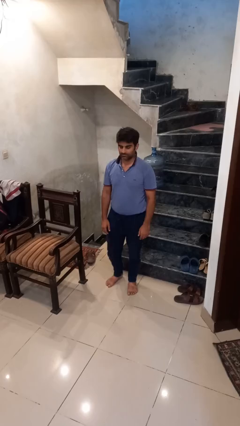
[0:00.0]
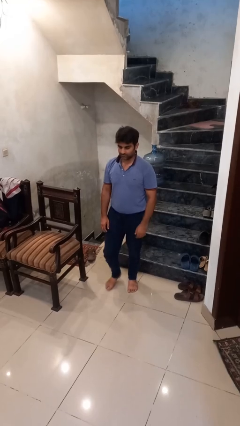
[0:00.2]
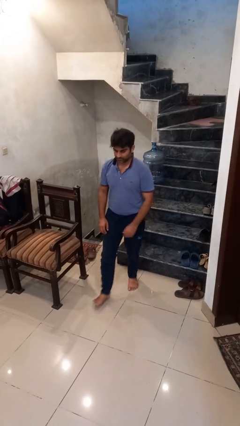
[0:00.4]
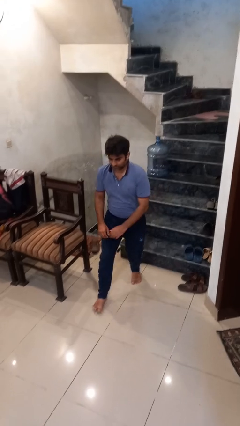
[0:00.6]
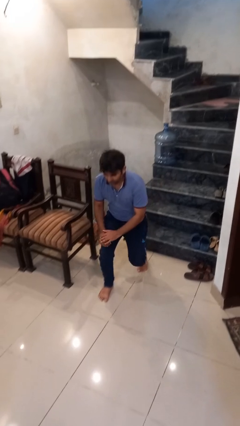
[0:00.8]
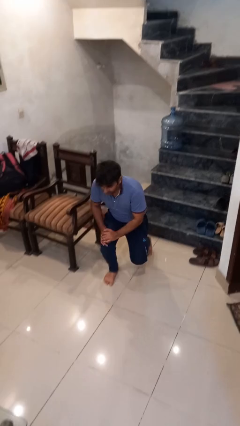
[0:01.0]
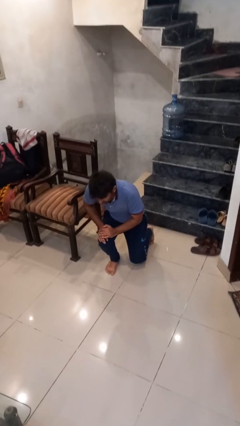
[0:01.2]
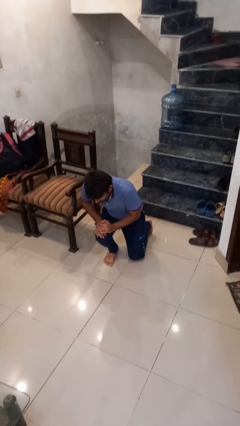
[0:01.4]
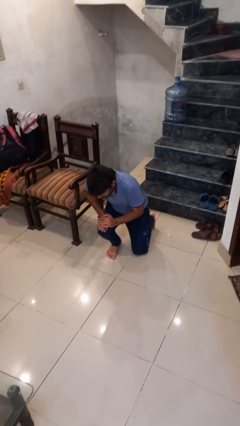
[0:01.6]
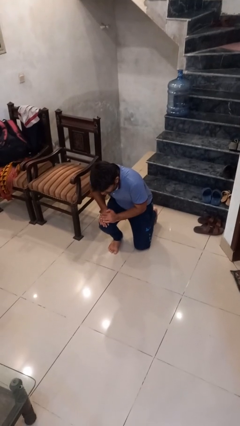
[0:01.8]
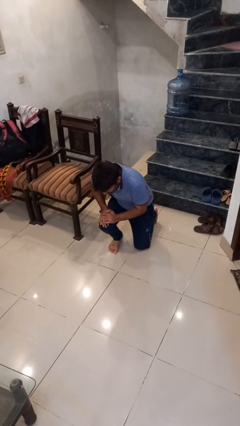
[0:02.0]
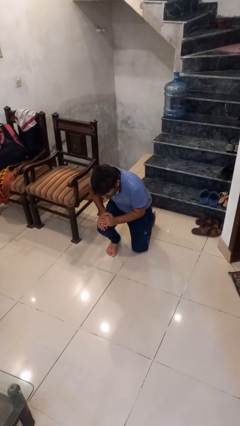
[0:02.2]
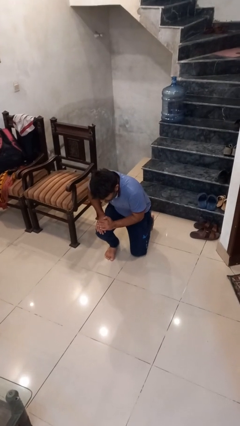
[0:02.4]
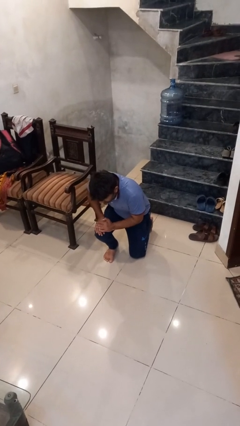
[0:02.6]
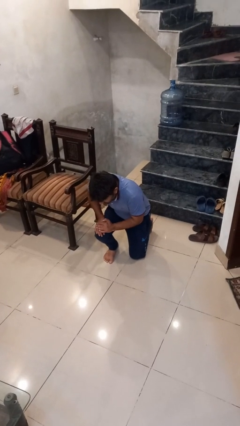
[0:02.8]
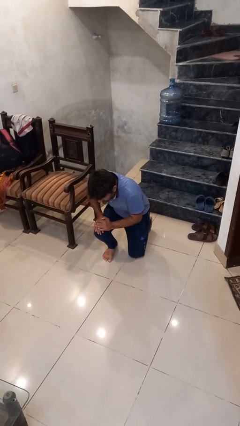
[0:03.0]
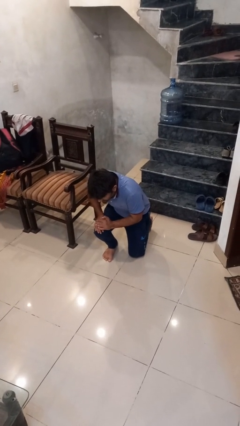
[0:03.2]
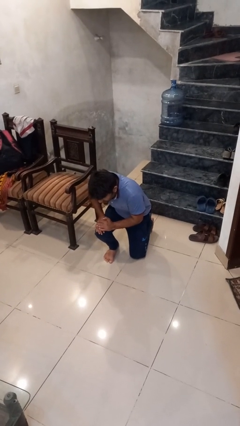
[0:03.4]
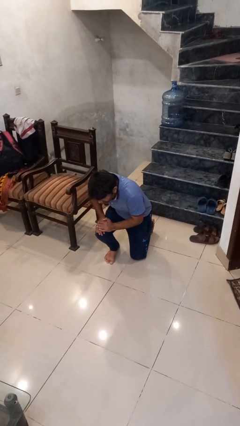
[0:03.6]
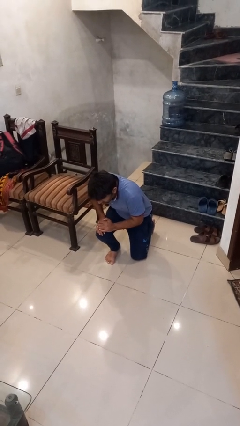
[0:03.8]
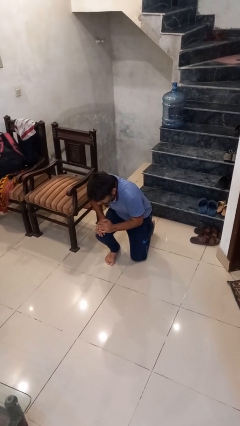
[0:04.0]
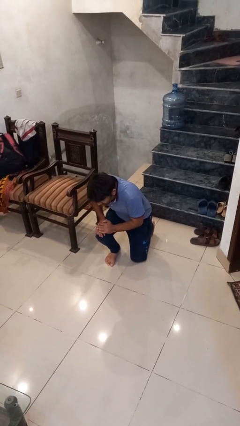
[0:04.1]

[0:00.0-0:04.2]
person kneels

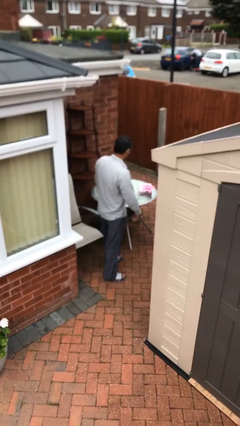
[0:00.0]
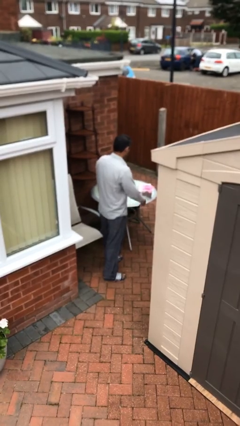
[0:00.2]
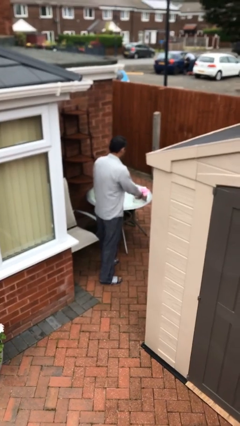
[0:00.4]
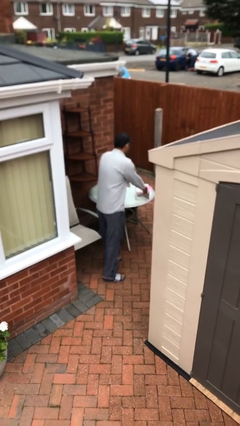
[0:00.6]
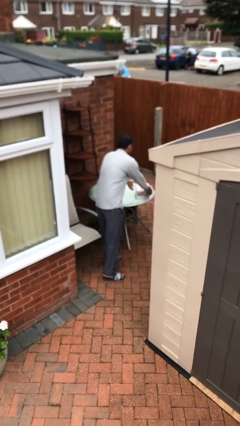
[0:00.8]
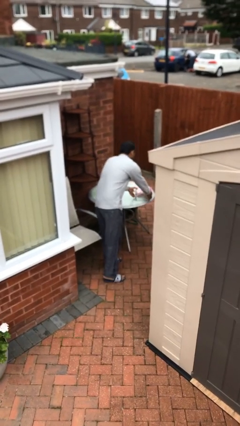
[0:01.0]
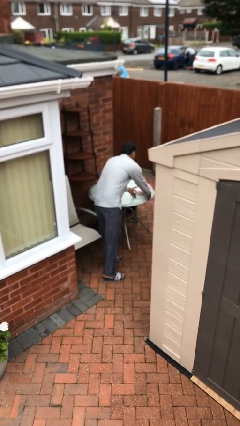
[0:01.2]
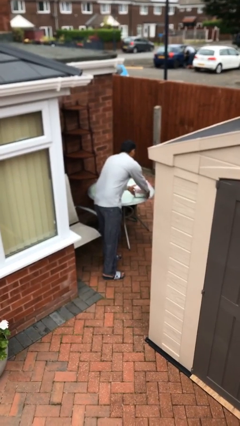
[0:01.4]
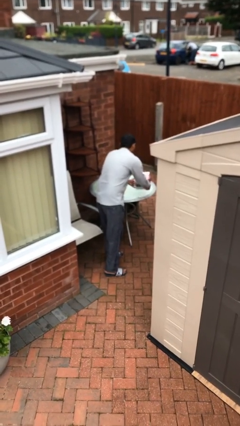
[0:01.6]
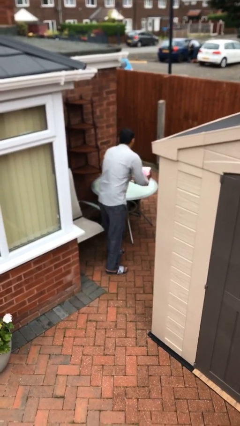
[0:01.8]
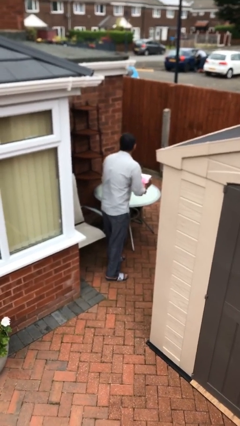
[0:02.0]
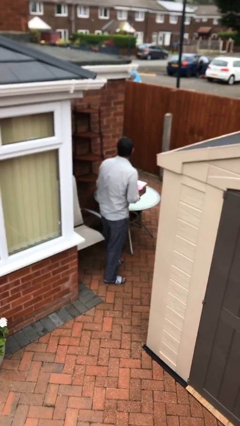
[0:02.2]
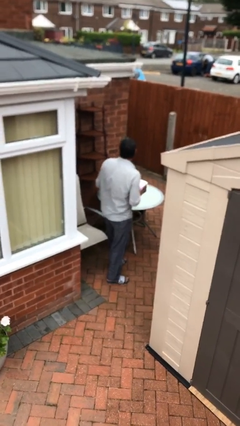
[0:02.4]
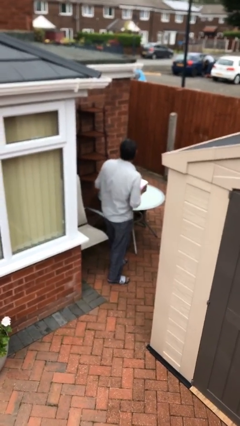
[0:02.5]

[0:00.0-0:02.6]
person picks up object from table

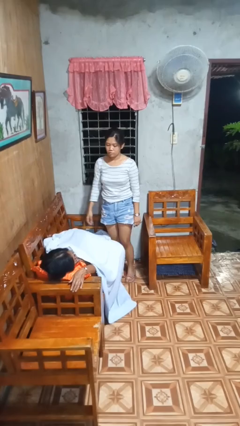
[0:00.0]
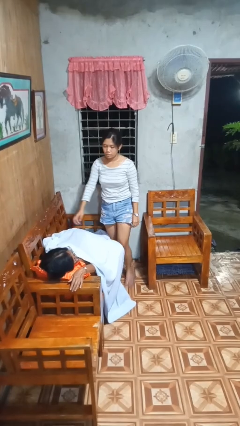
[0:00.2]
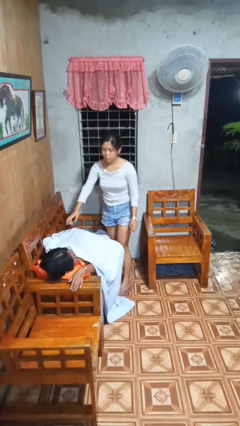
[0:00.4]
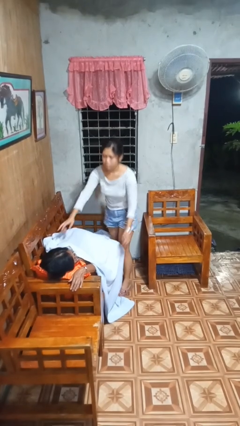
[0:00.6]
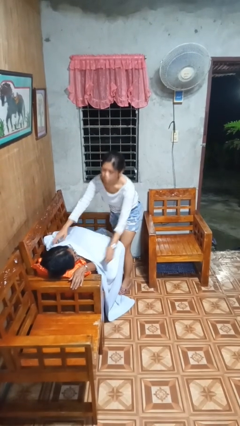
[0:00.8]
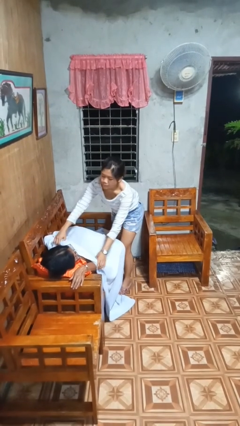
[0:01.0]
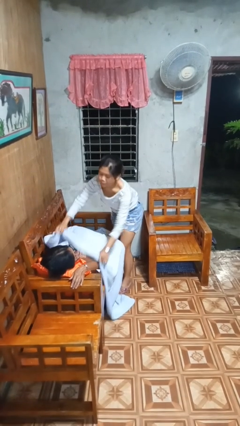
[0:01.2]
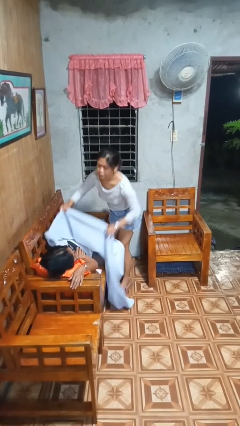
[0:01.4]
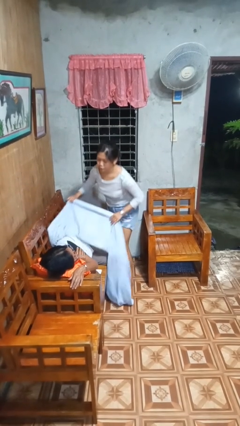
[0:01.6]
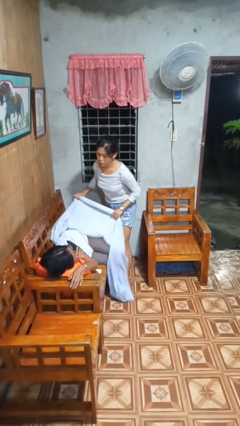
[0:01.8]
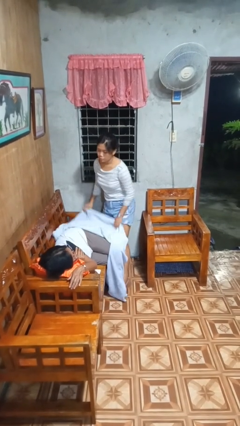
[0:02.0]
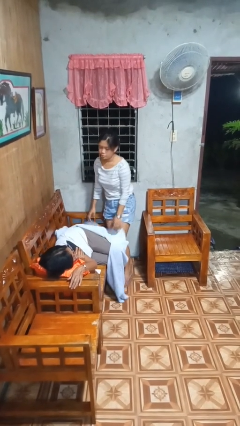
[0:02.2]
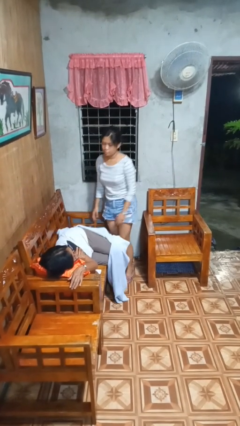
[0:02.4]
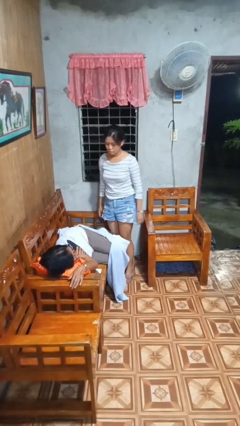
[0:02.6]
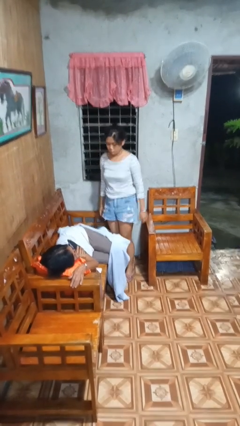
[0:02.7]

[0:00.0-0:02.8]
person uncovers friend with blanket

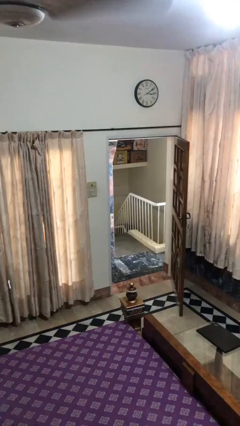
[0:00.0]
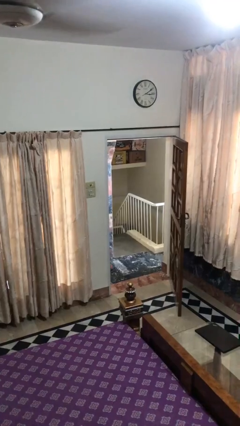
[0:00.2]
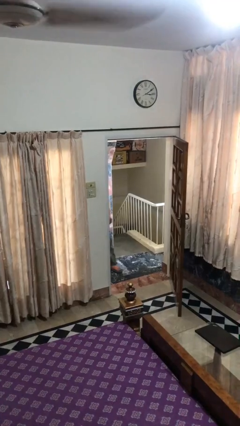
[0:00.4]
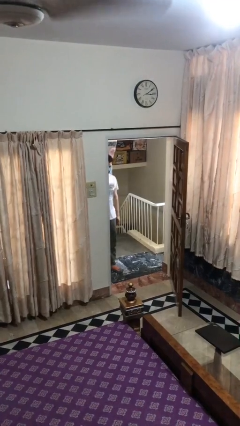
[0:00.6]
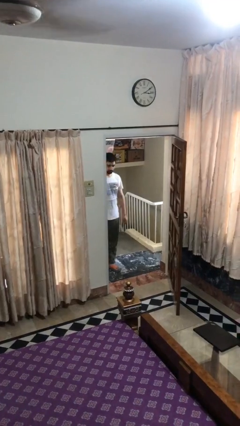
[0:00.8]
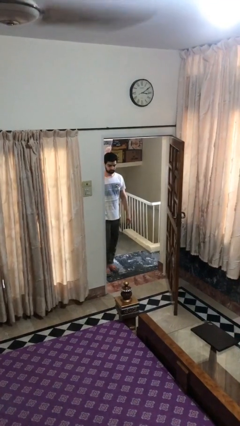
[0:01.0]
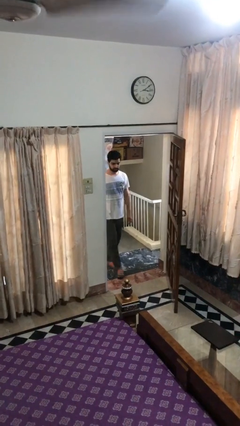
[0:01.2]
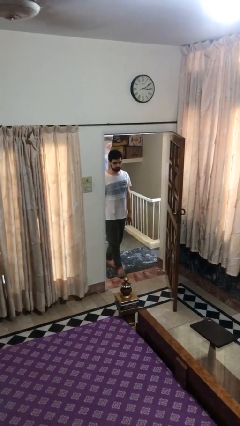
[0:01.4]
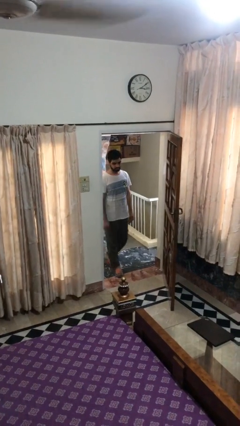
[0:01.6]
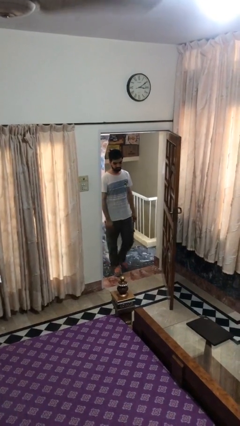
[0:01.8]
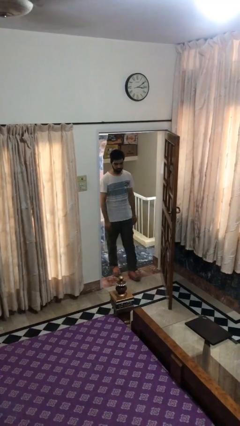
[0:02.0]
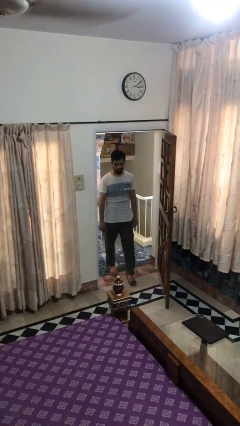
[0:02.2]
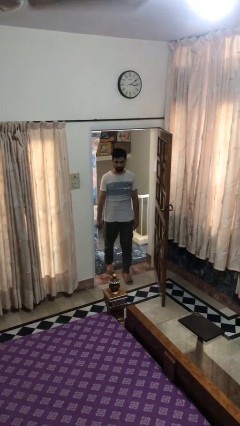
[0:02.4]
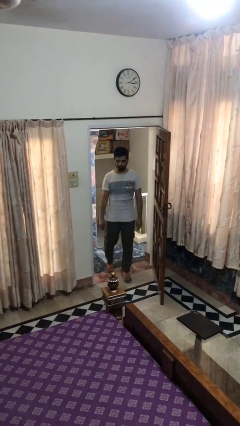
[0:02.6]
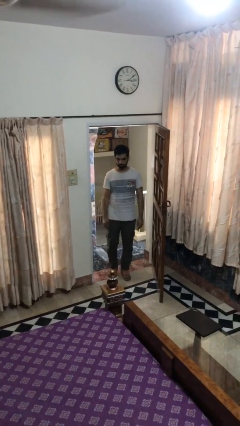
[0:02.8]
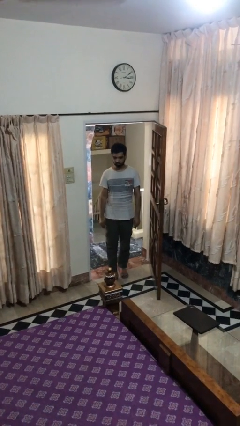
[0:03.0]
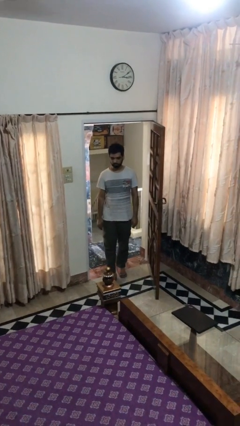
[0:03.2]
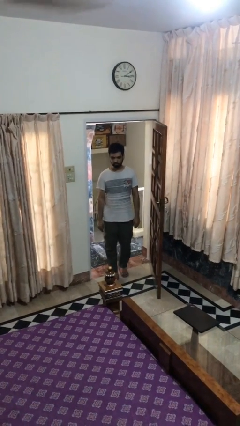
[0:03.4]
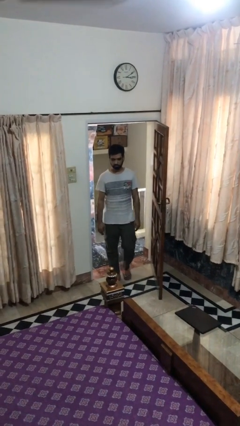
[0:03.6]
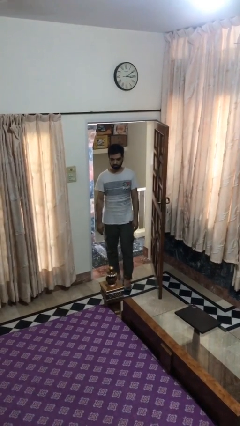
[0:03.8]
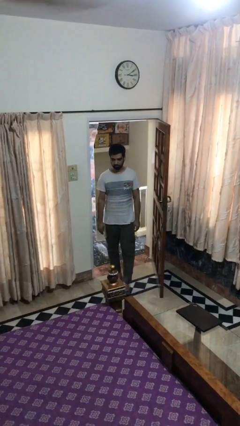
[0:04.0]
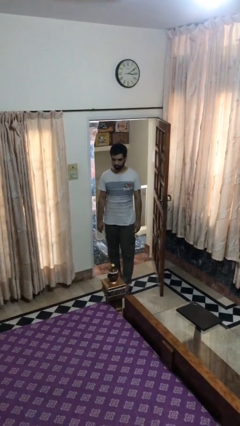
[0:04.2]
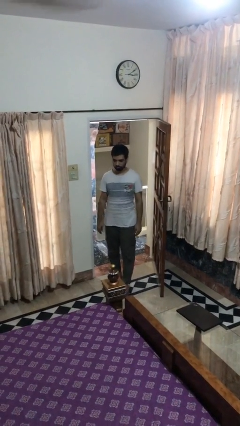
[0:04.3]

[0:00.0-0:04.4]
person enters scene through structure

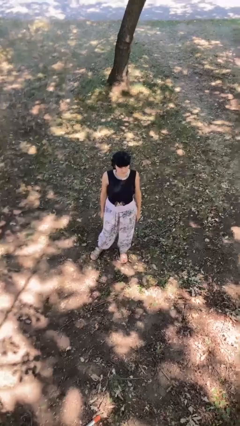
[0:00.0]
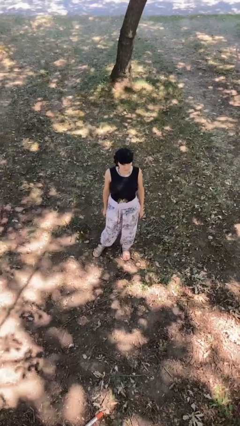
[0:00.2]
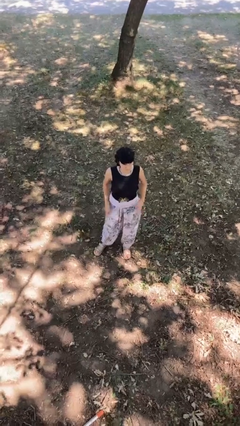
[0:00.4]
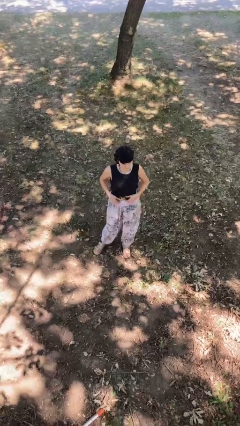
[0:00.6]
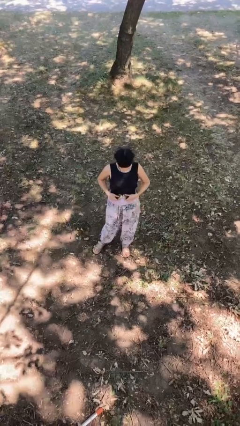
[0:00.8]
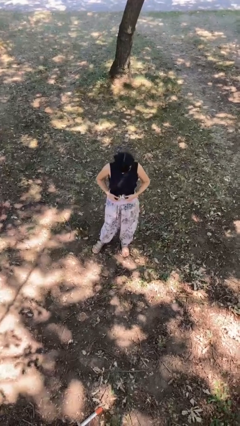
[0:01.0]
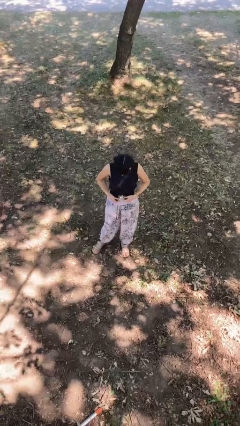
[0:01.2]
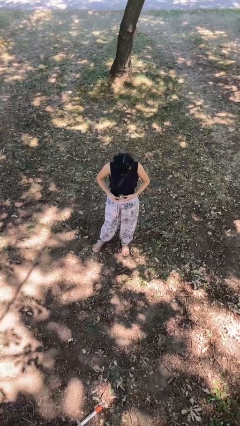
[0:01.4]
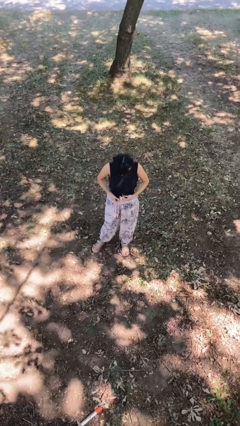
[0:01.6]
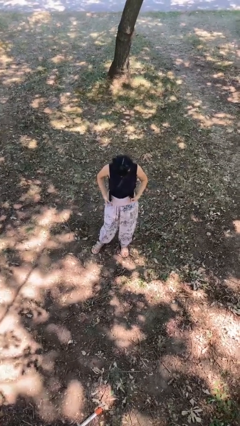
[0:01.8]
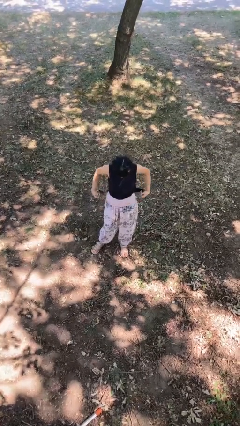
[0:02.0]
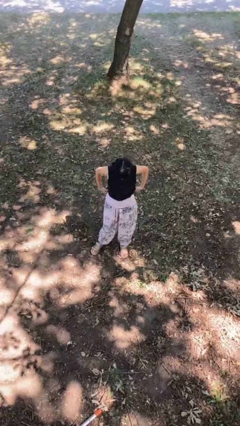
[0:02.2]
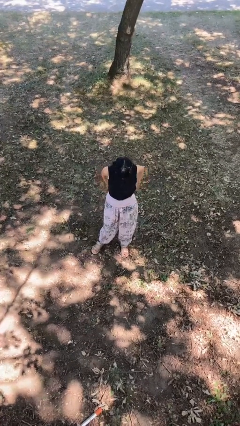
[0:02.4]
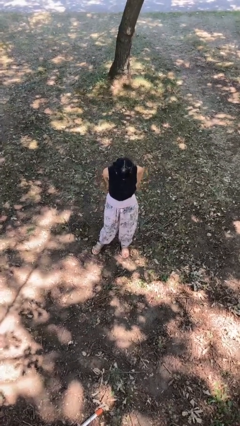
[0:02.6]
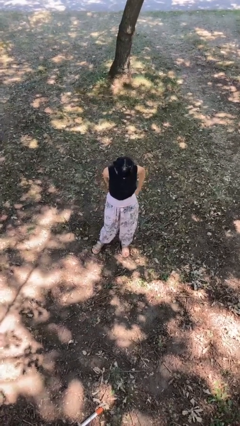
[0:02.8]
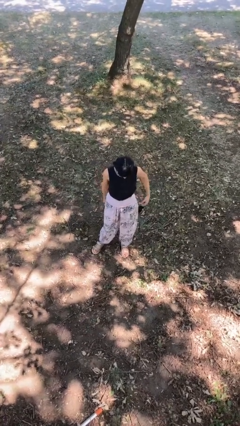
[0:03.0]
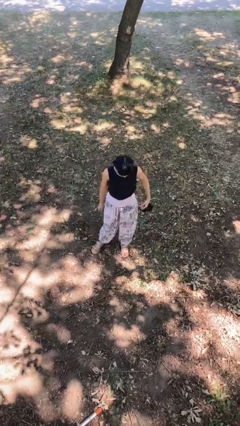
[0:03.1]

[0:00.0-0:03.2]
person takes off belt
